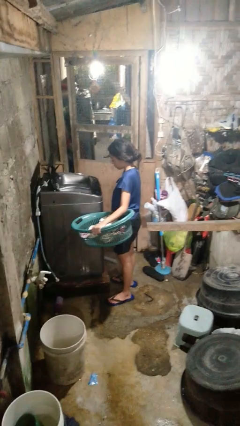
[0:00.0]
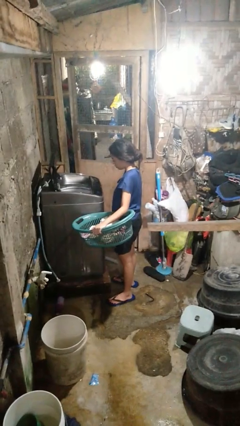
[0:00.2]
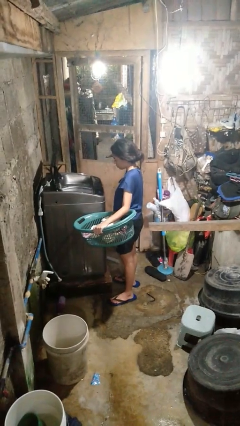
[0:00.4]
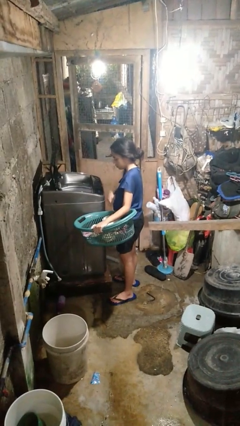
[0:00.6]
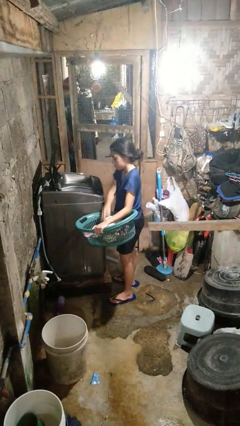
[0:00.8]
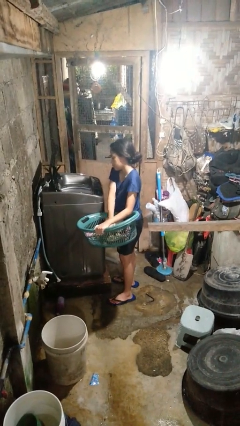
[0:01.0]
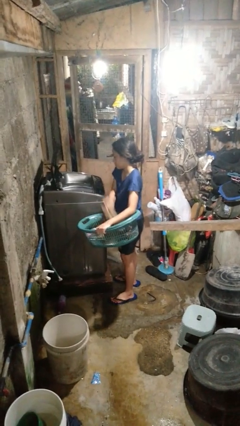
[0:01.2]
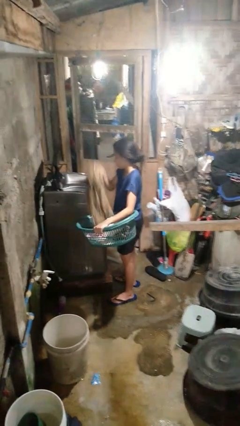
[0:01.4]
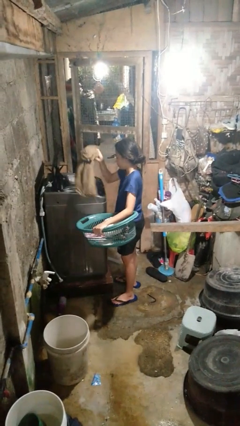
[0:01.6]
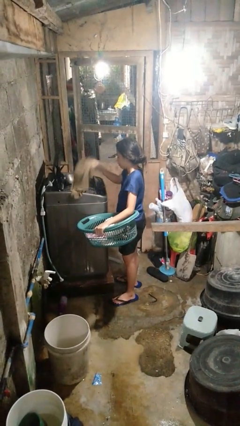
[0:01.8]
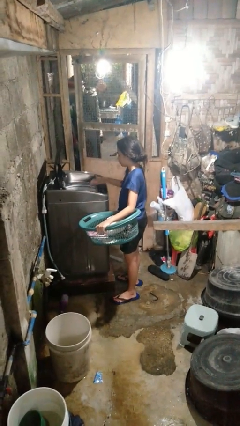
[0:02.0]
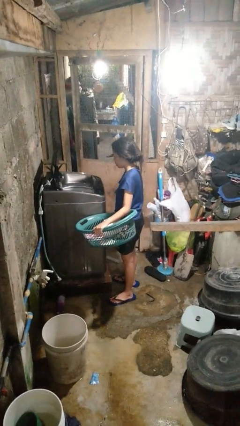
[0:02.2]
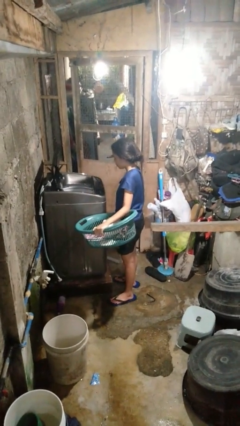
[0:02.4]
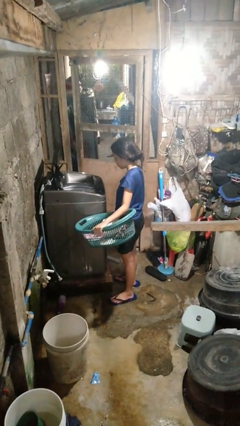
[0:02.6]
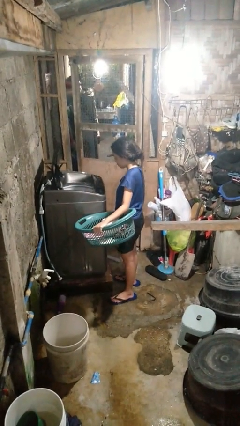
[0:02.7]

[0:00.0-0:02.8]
person loads clotheswasher

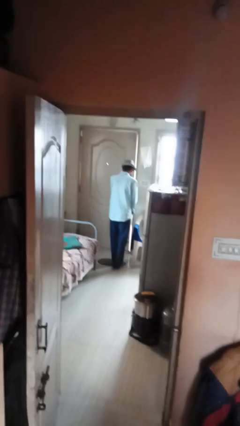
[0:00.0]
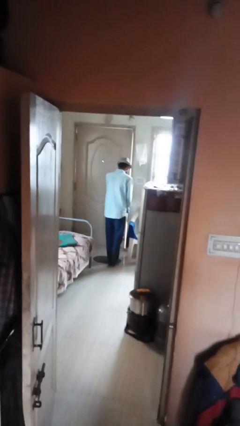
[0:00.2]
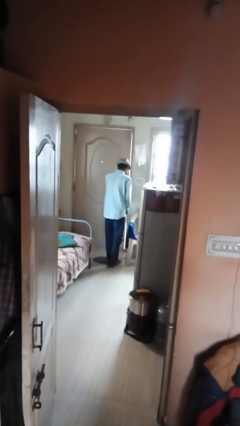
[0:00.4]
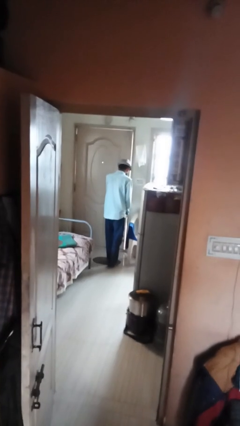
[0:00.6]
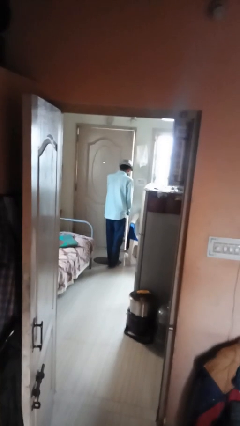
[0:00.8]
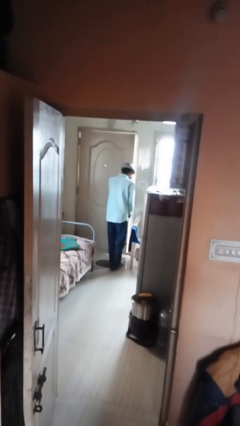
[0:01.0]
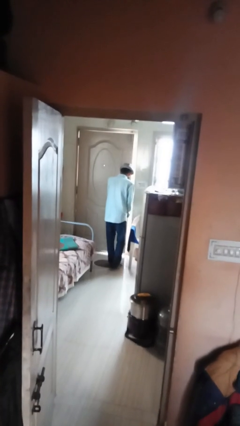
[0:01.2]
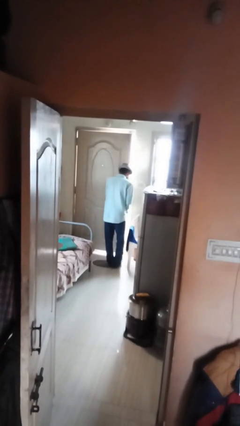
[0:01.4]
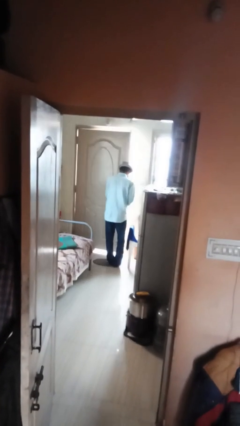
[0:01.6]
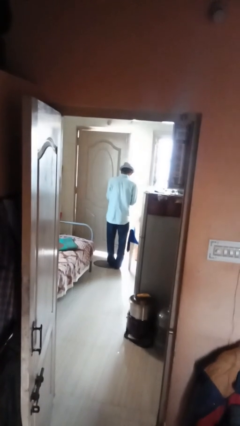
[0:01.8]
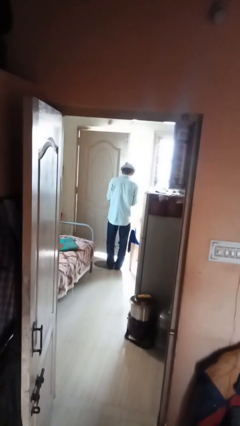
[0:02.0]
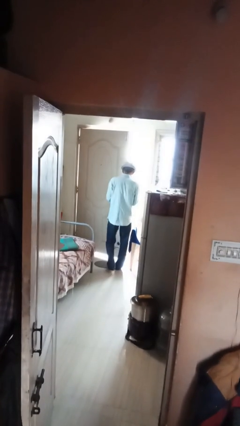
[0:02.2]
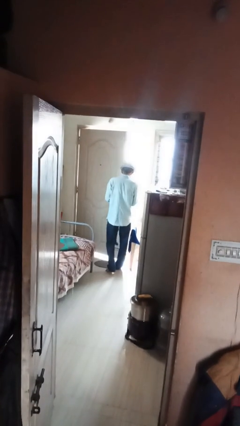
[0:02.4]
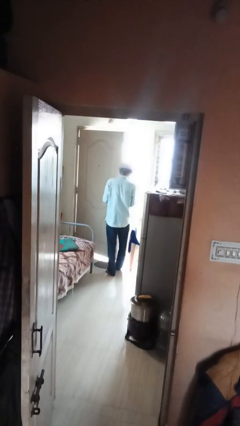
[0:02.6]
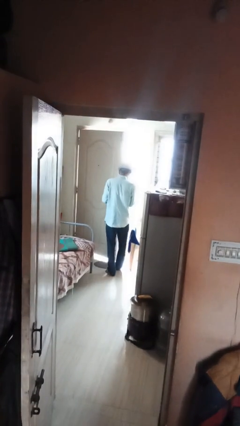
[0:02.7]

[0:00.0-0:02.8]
person closes facility door

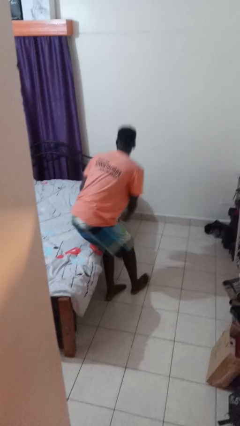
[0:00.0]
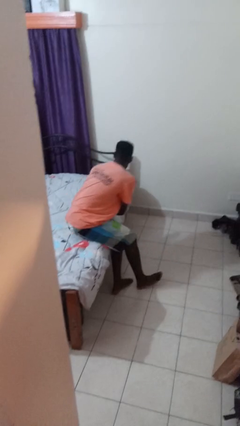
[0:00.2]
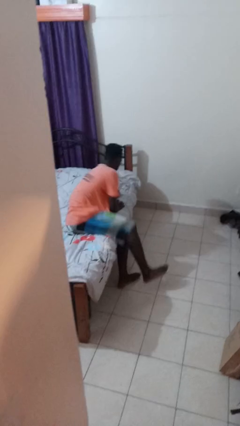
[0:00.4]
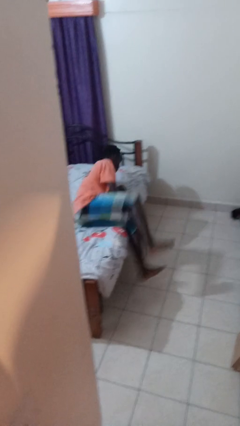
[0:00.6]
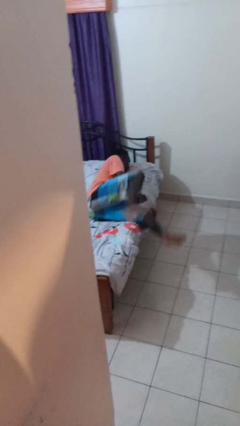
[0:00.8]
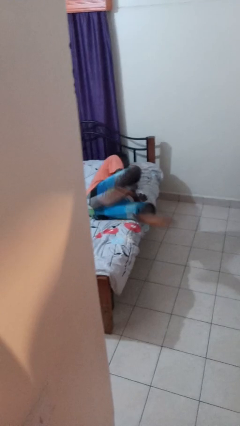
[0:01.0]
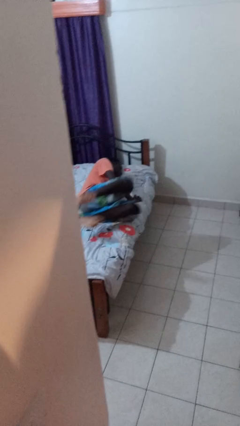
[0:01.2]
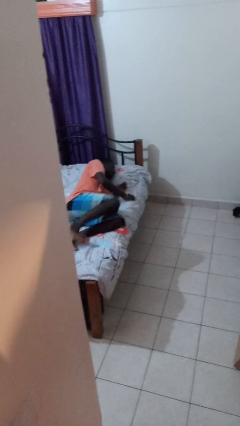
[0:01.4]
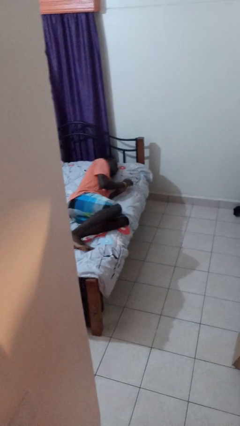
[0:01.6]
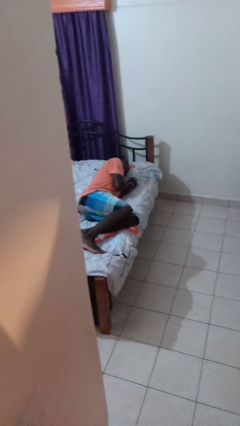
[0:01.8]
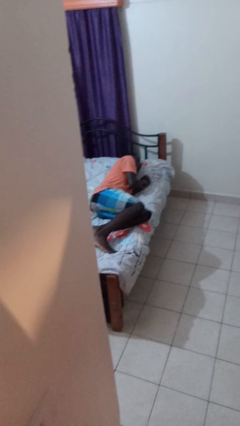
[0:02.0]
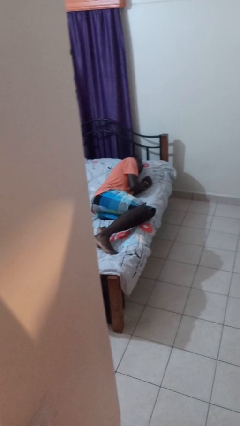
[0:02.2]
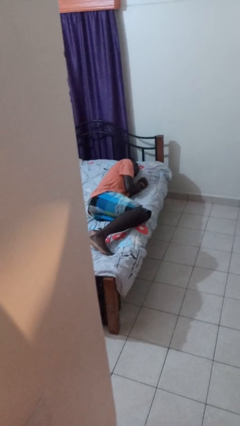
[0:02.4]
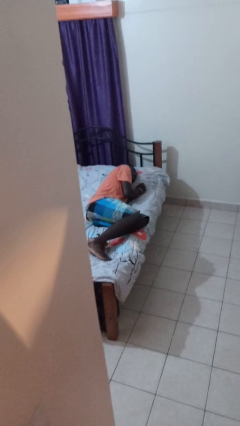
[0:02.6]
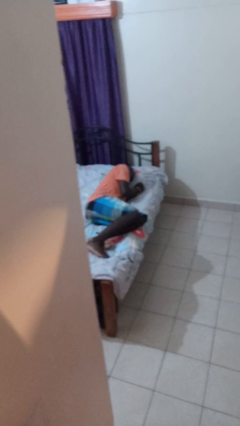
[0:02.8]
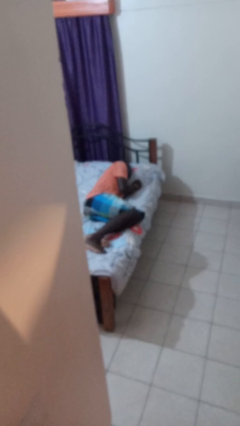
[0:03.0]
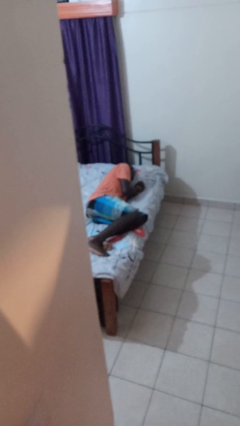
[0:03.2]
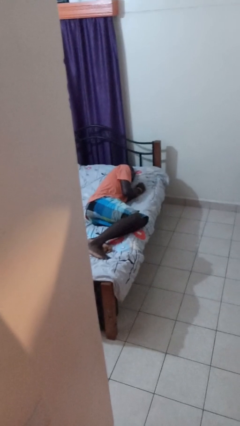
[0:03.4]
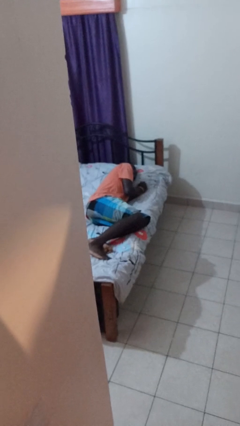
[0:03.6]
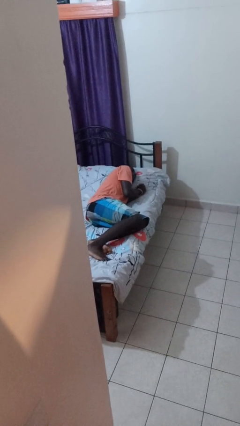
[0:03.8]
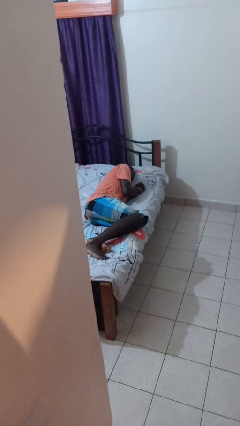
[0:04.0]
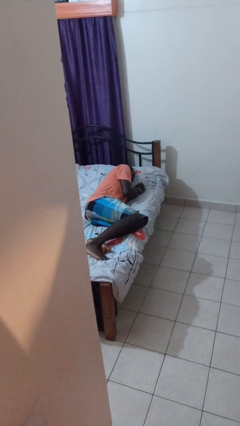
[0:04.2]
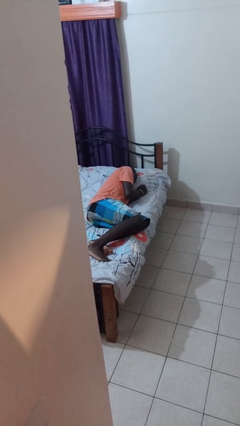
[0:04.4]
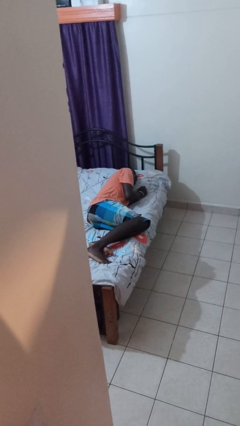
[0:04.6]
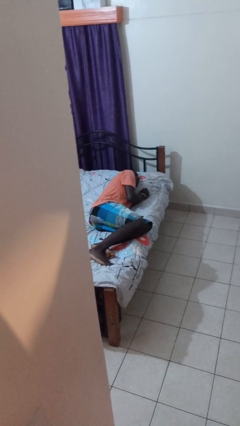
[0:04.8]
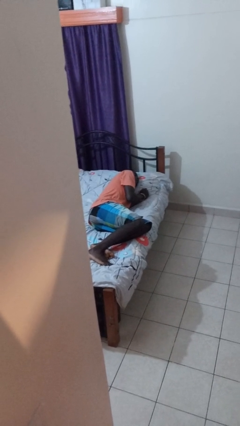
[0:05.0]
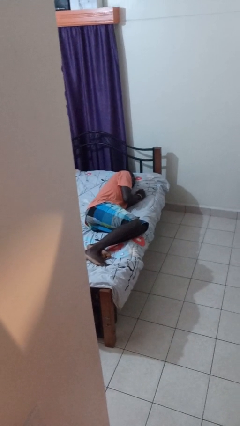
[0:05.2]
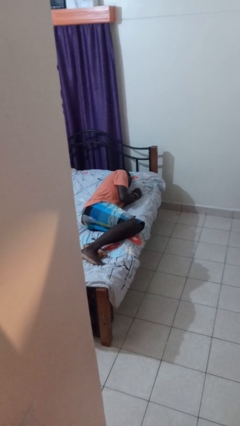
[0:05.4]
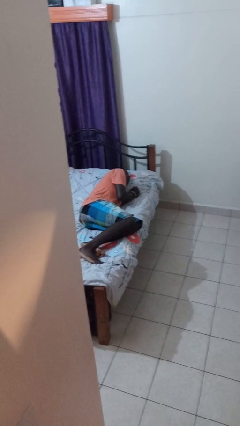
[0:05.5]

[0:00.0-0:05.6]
person lies down on bed

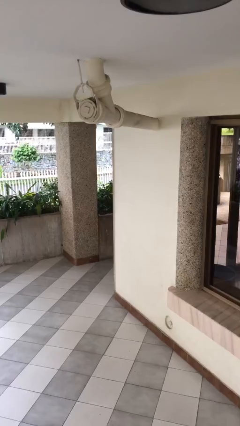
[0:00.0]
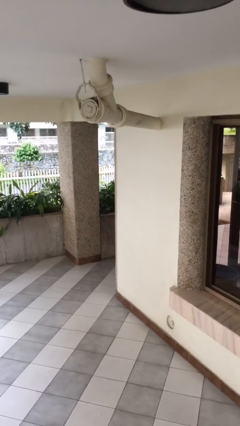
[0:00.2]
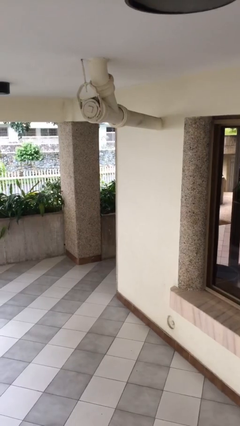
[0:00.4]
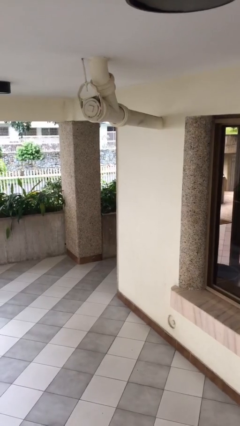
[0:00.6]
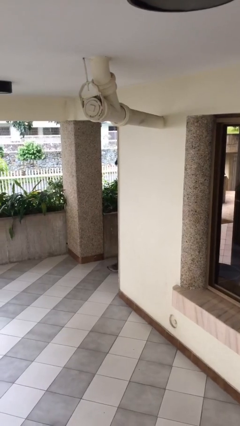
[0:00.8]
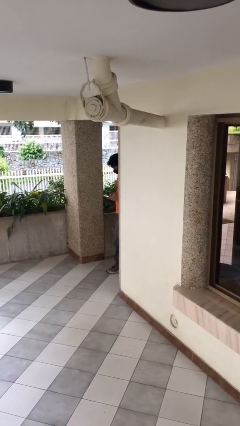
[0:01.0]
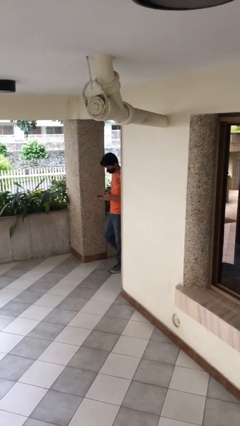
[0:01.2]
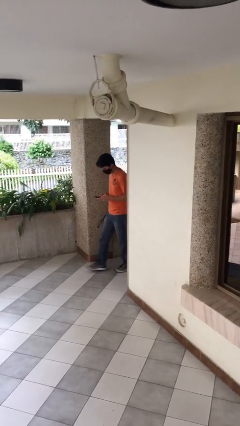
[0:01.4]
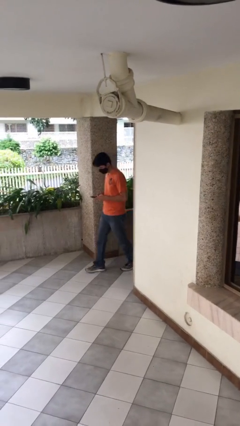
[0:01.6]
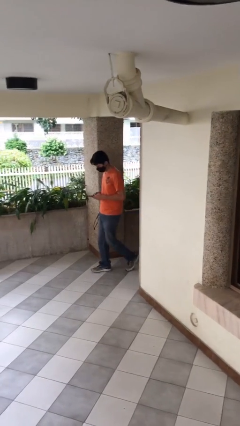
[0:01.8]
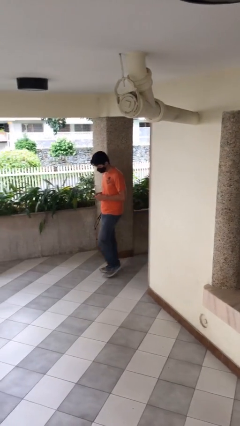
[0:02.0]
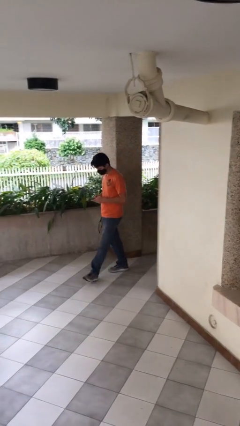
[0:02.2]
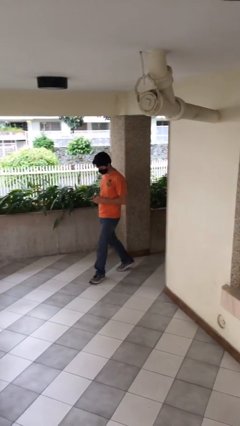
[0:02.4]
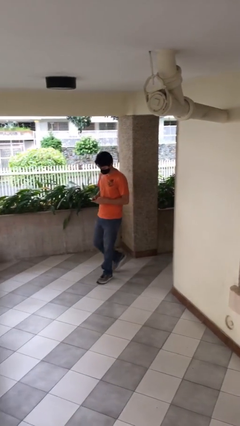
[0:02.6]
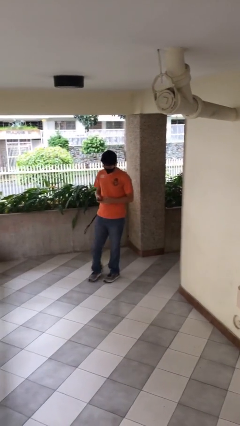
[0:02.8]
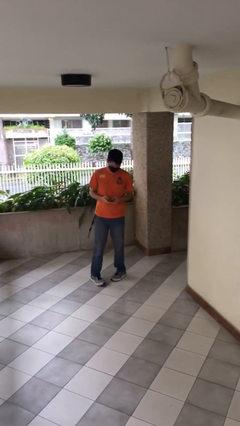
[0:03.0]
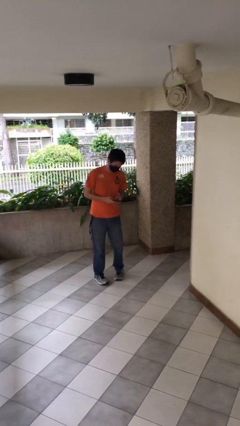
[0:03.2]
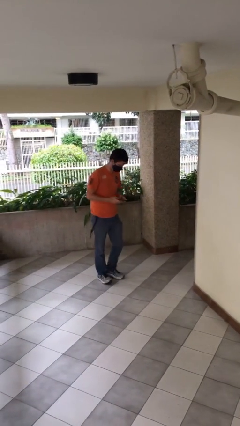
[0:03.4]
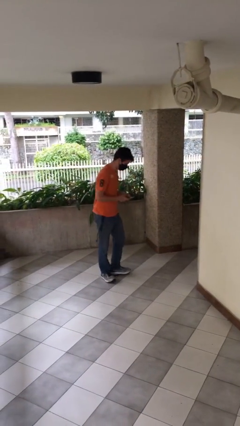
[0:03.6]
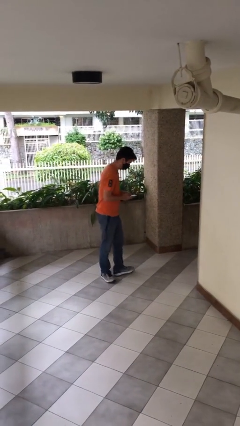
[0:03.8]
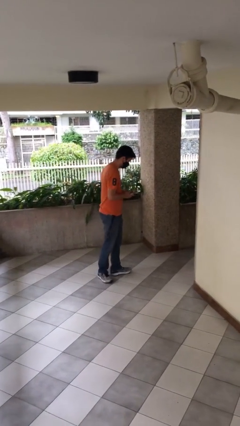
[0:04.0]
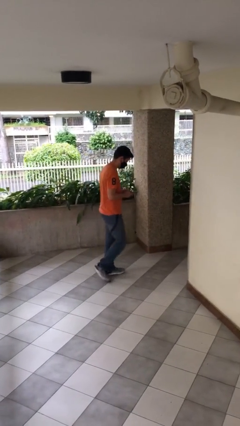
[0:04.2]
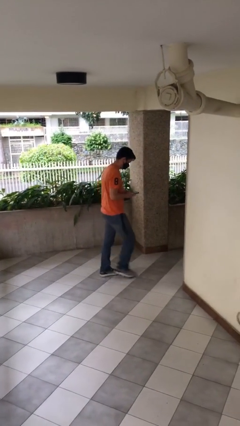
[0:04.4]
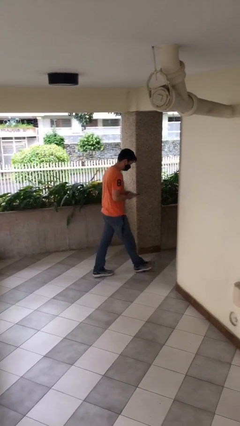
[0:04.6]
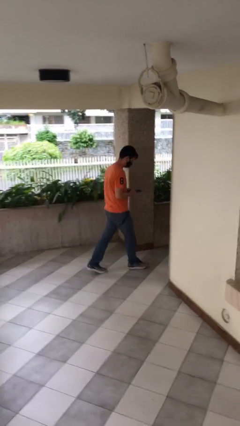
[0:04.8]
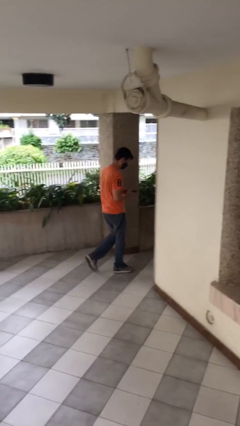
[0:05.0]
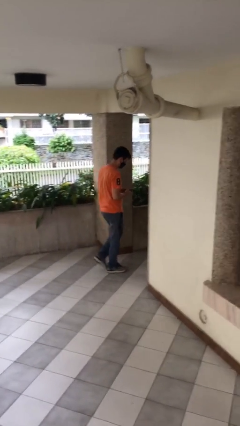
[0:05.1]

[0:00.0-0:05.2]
person enters scene through structure

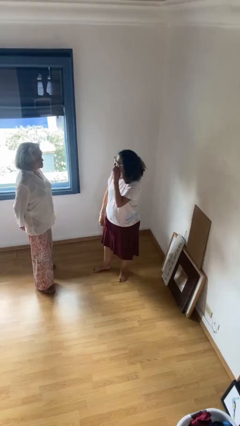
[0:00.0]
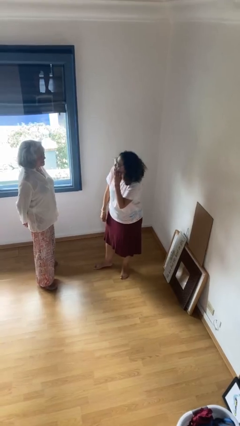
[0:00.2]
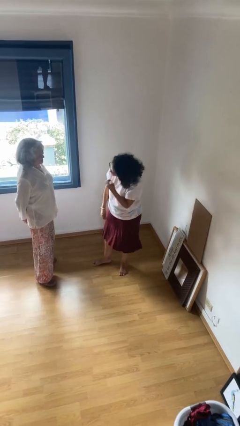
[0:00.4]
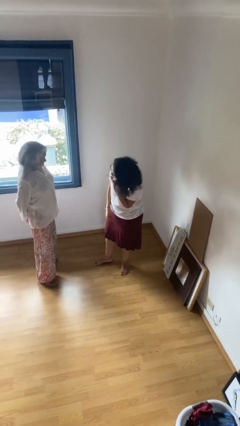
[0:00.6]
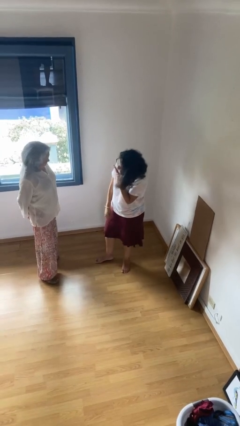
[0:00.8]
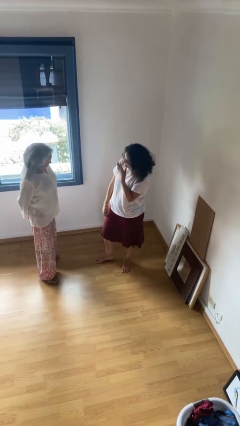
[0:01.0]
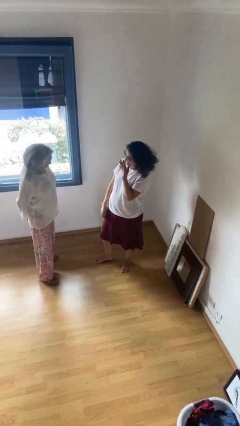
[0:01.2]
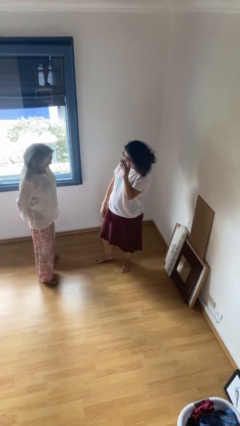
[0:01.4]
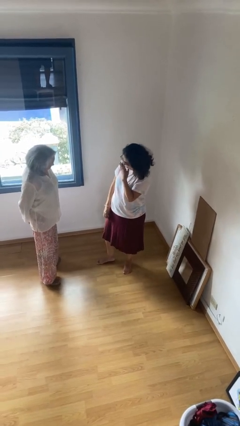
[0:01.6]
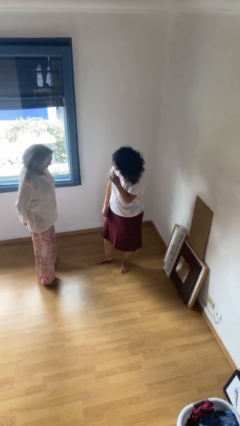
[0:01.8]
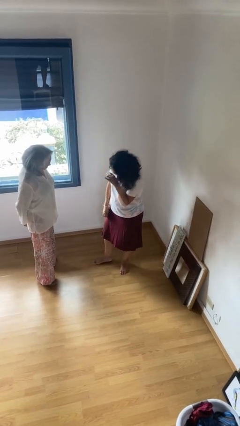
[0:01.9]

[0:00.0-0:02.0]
person laughs with person
